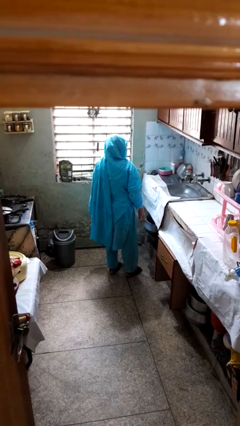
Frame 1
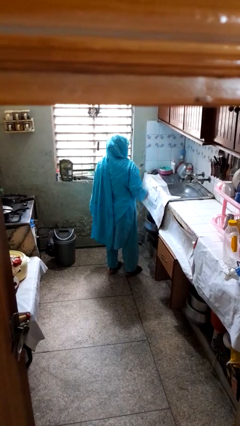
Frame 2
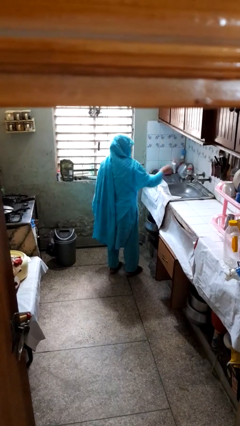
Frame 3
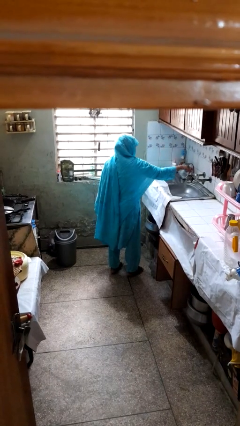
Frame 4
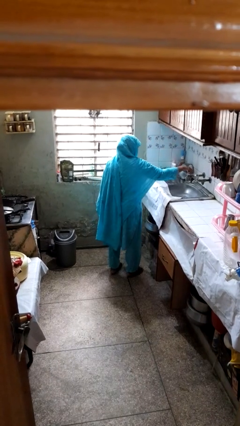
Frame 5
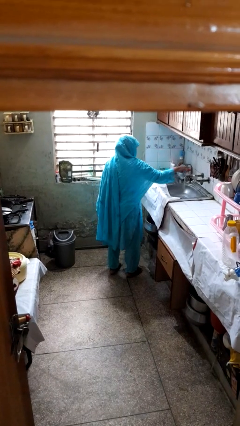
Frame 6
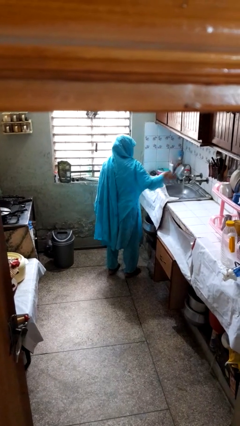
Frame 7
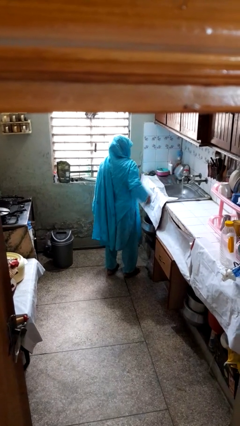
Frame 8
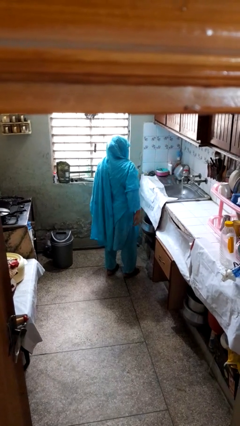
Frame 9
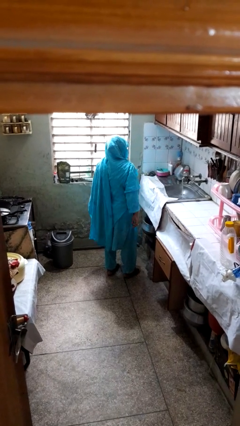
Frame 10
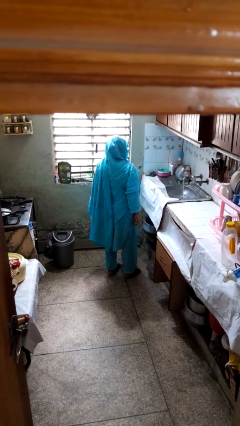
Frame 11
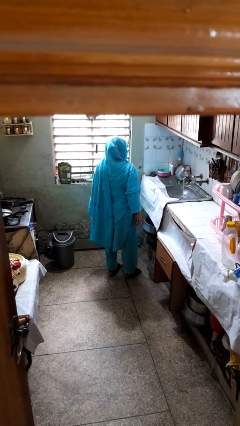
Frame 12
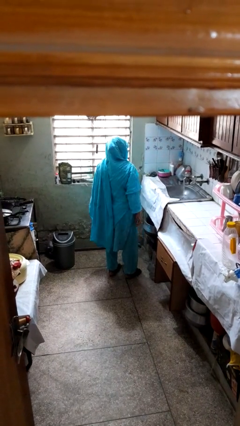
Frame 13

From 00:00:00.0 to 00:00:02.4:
person turns on faucet

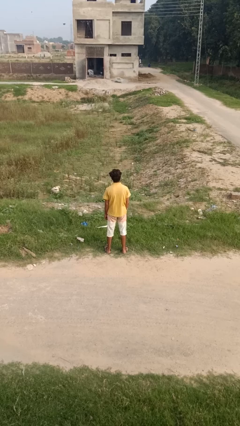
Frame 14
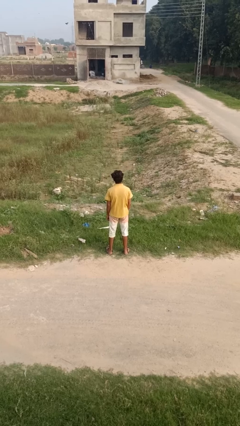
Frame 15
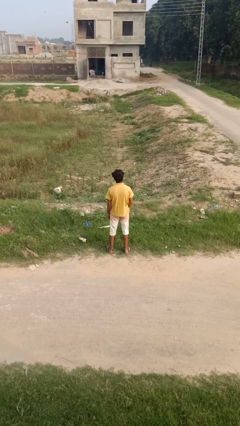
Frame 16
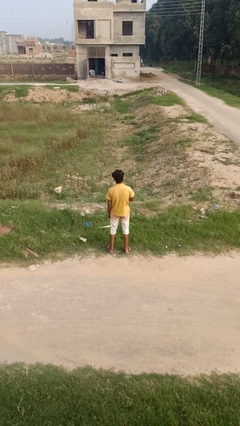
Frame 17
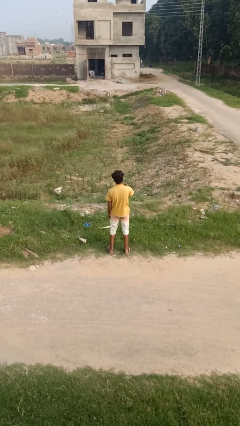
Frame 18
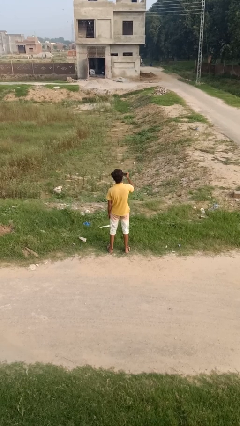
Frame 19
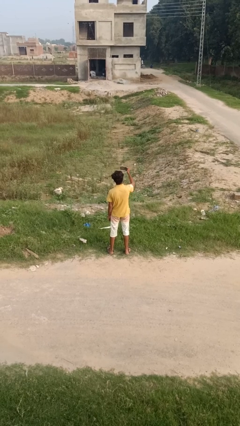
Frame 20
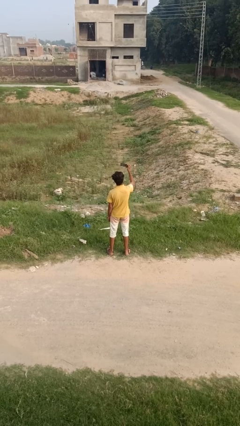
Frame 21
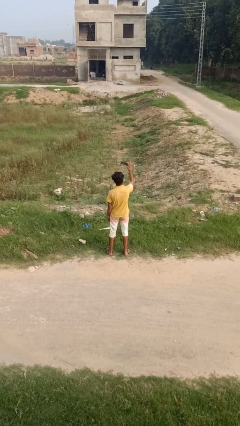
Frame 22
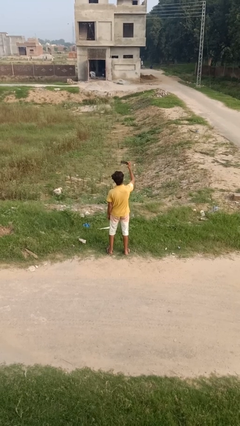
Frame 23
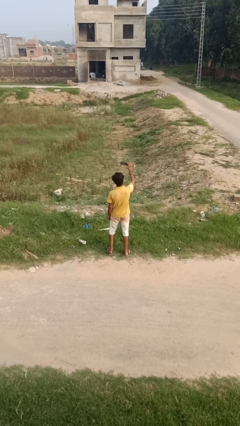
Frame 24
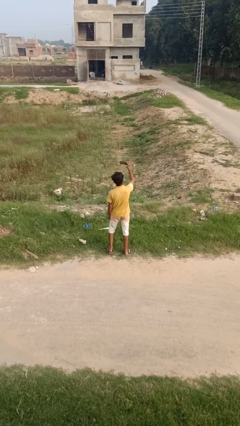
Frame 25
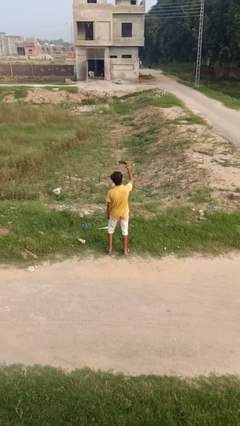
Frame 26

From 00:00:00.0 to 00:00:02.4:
person takes selfie

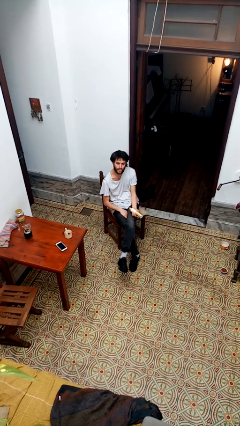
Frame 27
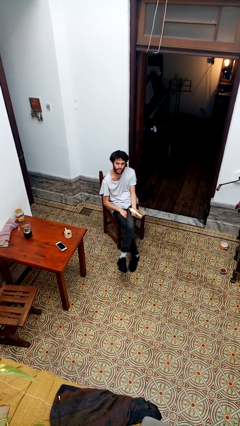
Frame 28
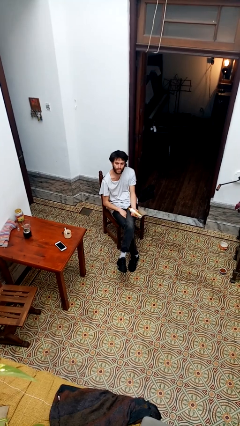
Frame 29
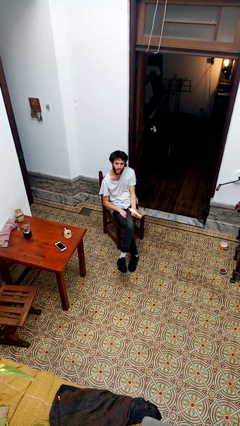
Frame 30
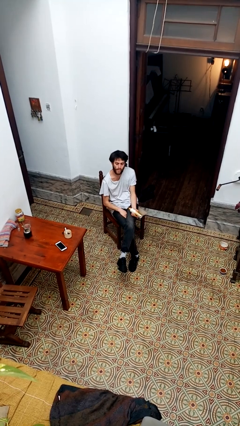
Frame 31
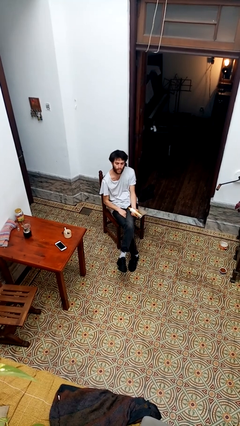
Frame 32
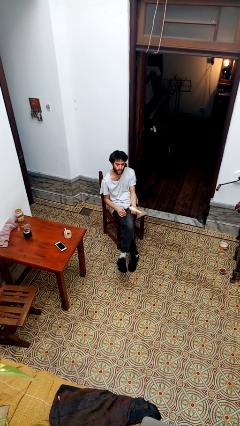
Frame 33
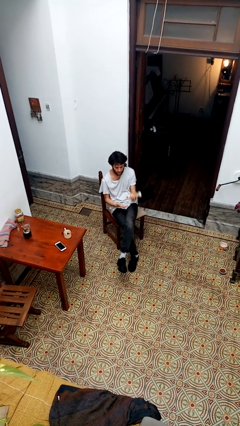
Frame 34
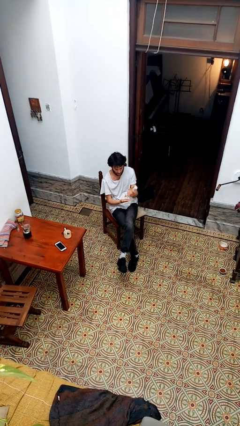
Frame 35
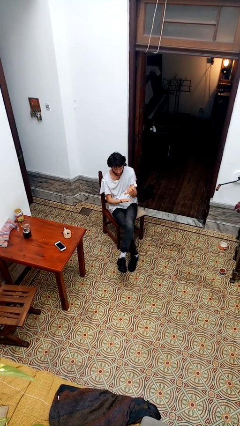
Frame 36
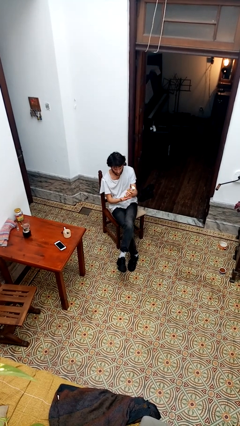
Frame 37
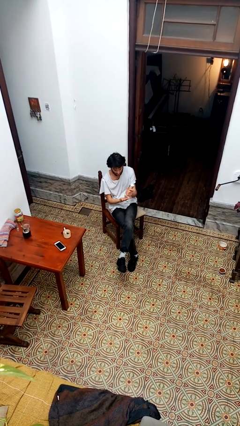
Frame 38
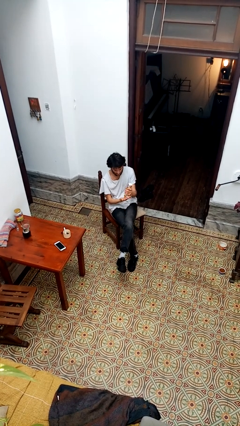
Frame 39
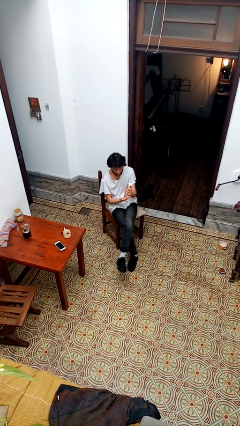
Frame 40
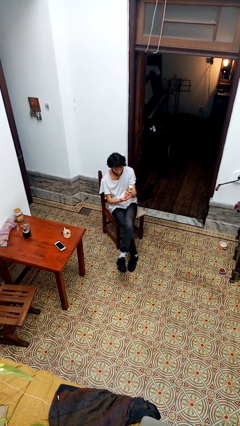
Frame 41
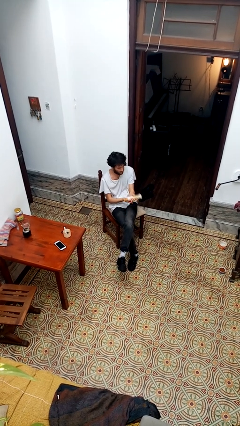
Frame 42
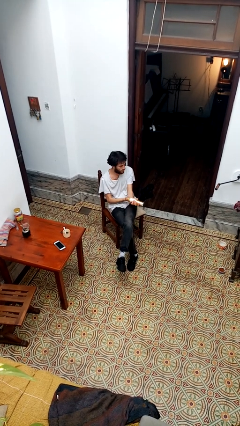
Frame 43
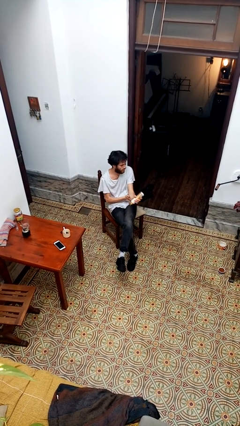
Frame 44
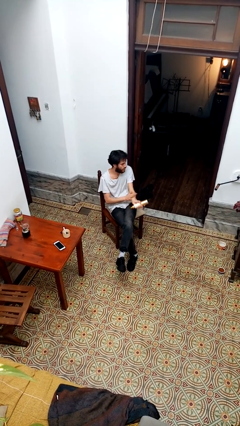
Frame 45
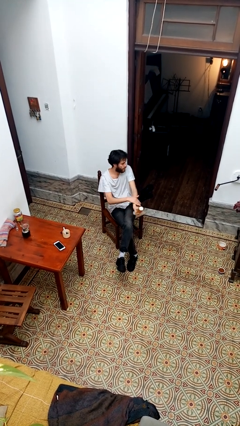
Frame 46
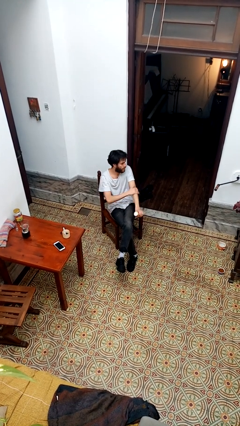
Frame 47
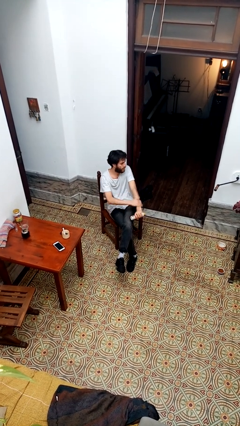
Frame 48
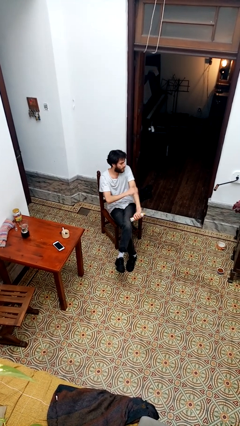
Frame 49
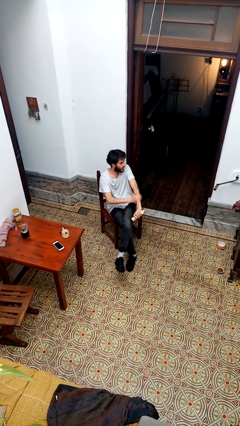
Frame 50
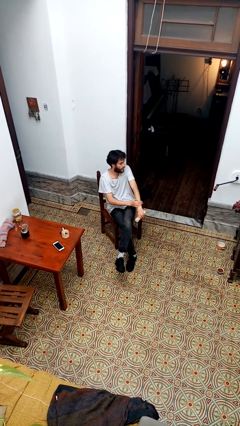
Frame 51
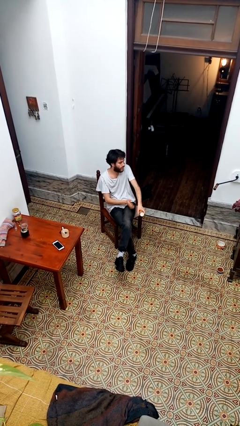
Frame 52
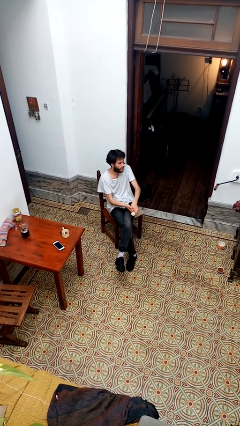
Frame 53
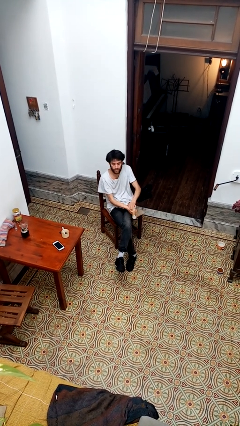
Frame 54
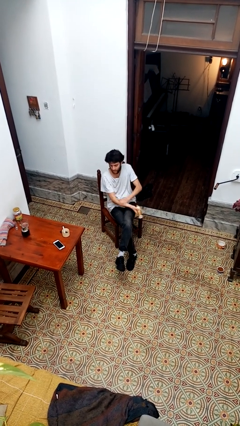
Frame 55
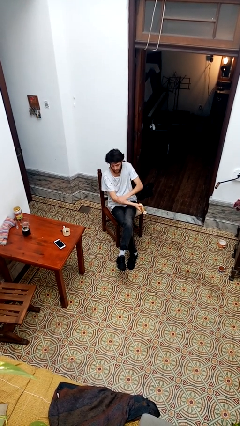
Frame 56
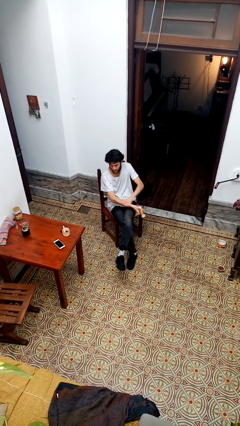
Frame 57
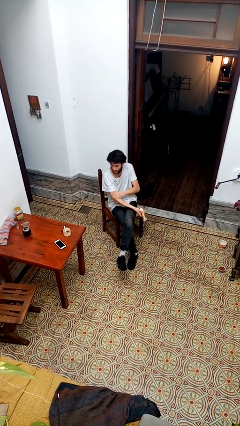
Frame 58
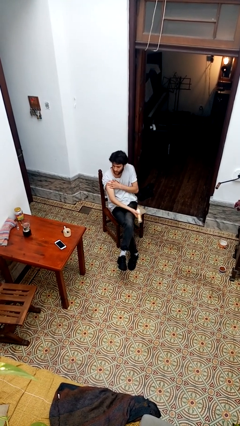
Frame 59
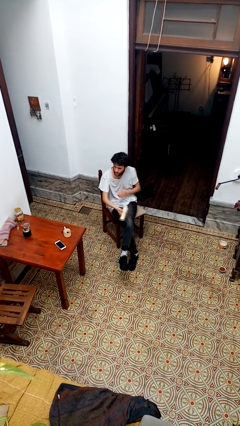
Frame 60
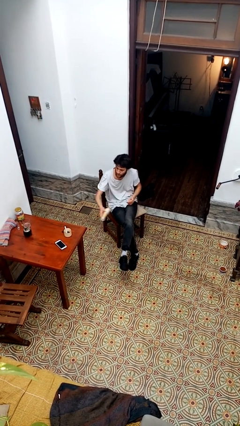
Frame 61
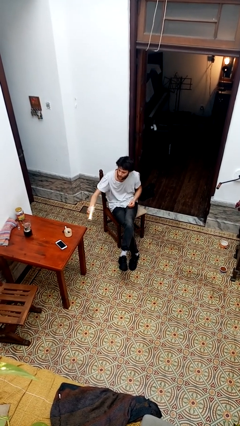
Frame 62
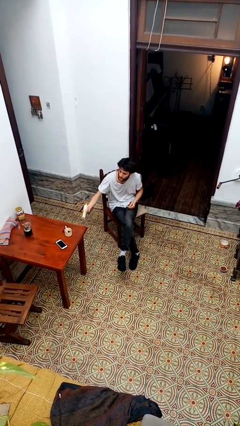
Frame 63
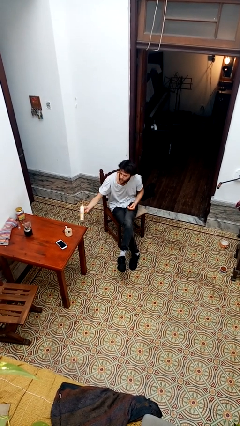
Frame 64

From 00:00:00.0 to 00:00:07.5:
person applies sunscreen

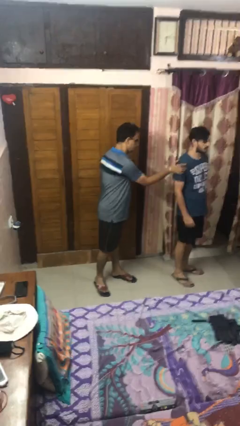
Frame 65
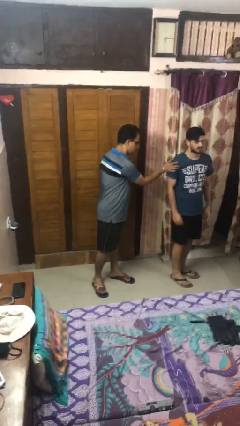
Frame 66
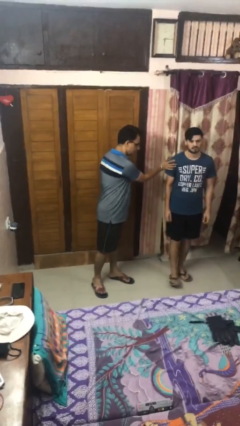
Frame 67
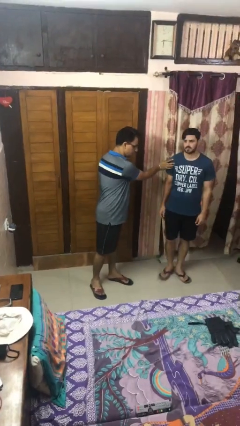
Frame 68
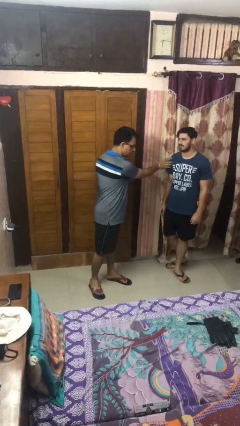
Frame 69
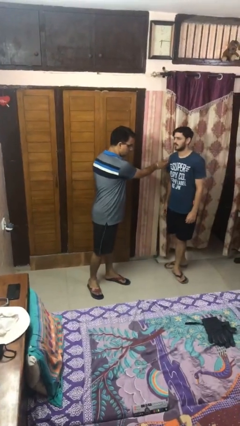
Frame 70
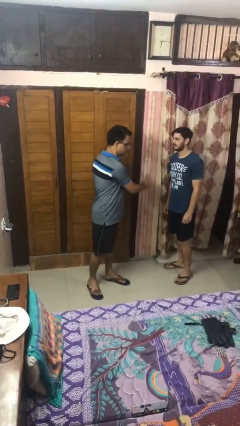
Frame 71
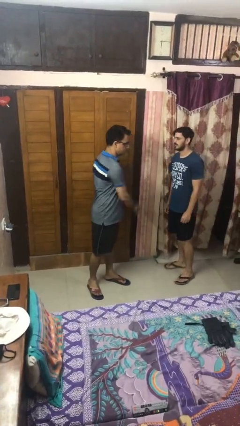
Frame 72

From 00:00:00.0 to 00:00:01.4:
person spins person around

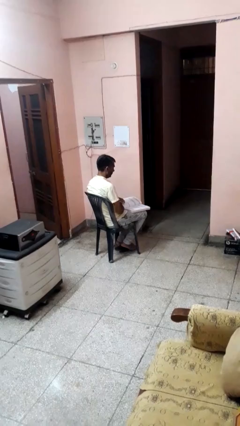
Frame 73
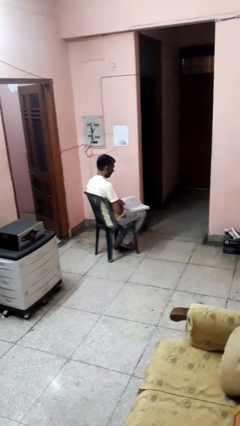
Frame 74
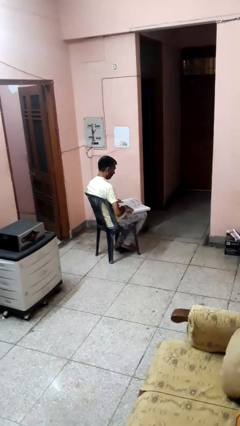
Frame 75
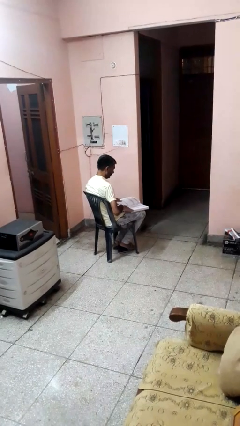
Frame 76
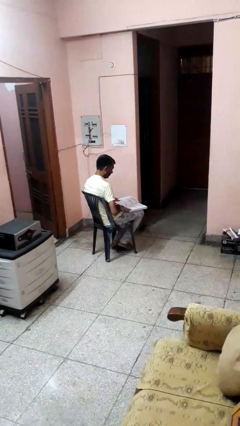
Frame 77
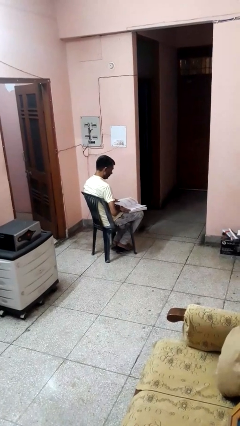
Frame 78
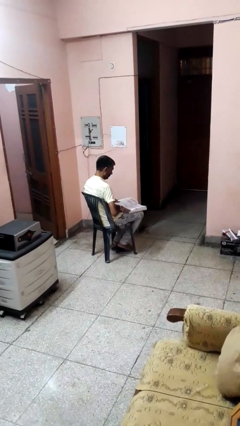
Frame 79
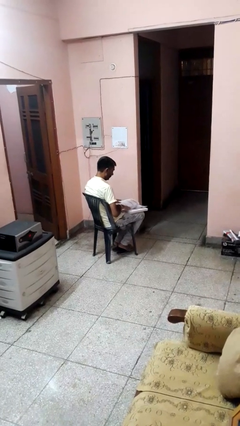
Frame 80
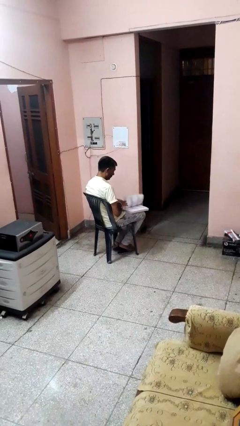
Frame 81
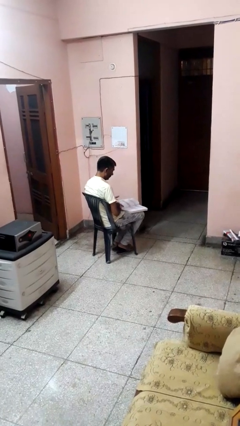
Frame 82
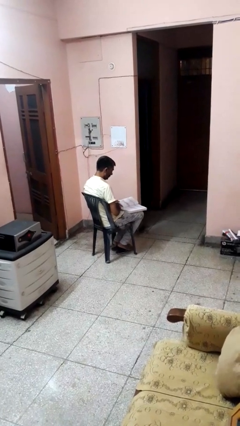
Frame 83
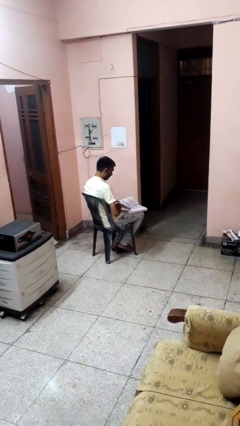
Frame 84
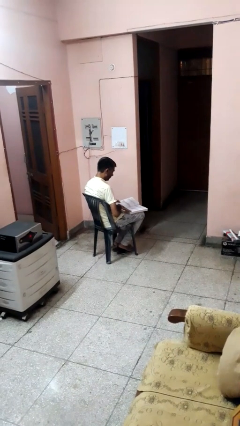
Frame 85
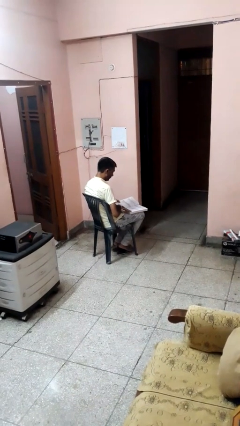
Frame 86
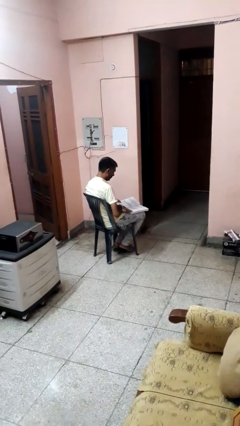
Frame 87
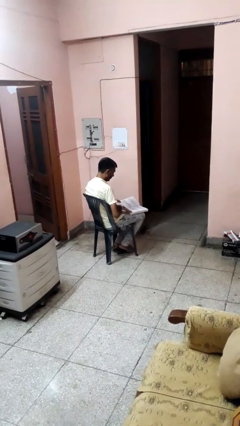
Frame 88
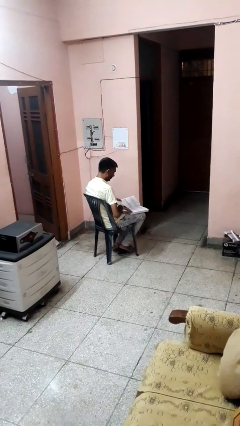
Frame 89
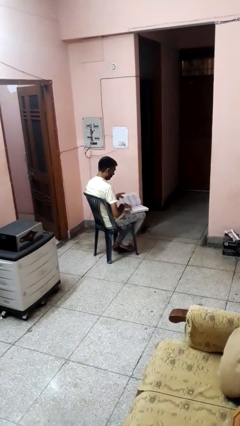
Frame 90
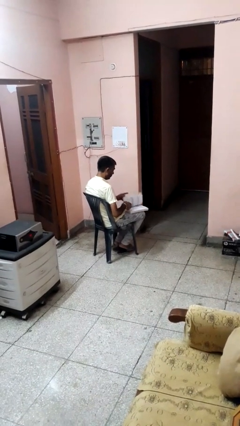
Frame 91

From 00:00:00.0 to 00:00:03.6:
person reads book

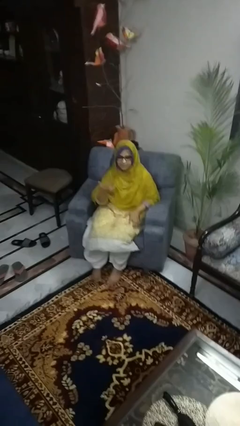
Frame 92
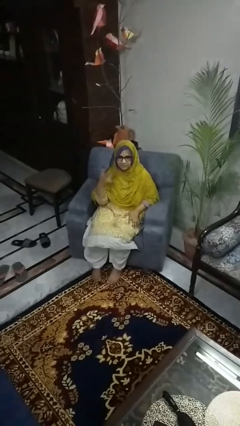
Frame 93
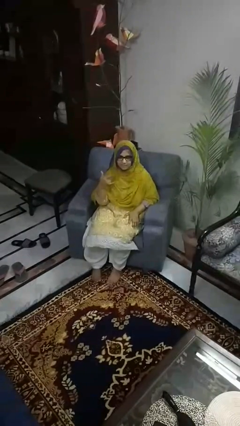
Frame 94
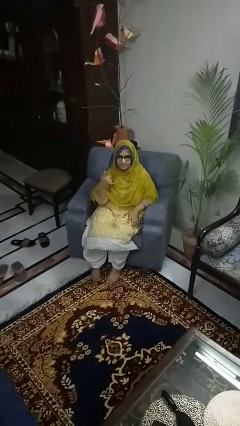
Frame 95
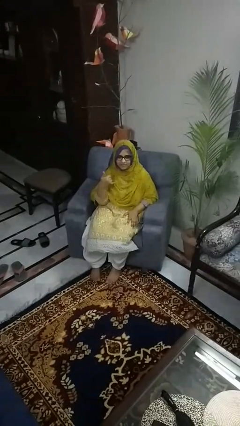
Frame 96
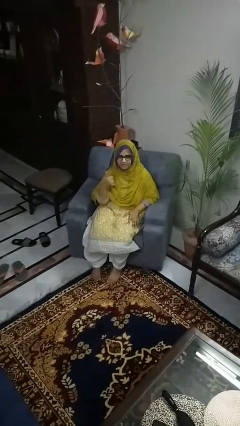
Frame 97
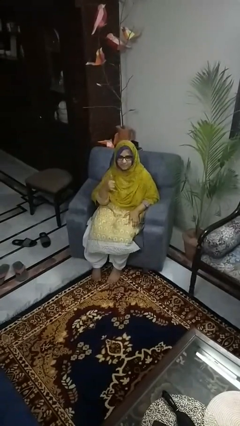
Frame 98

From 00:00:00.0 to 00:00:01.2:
person gestures hang loose
